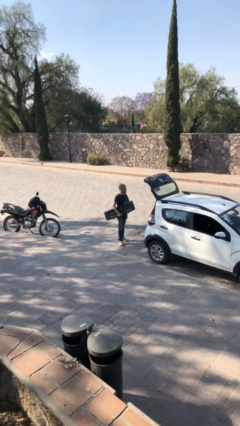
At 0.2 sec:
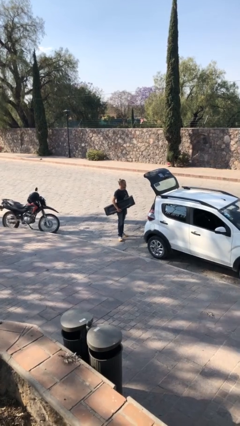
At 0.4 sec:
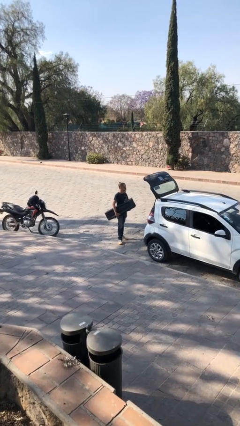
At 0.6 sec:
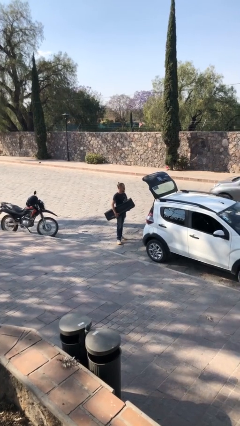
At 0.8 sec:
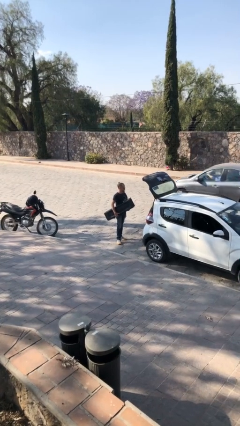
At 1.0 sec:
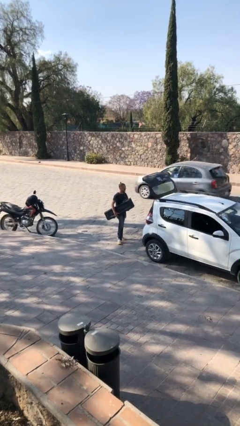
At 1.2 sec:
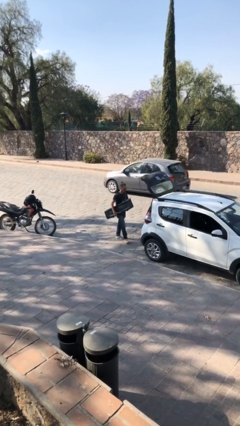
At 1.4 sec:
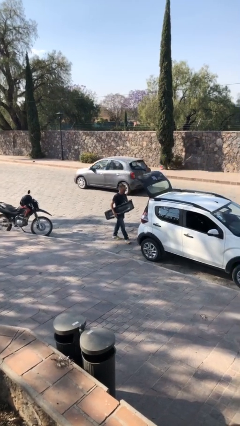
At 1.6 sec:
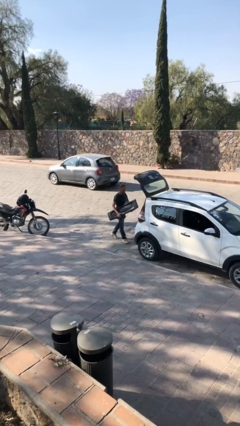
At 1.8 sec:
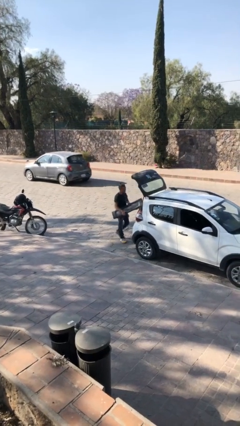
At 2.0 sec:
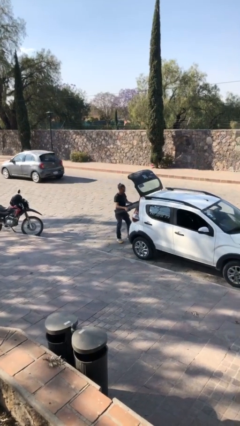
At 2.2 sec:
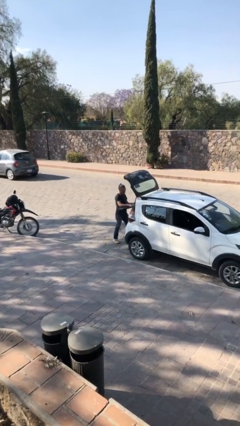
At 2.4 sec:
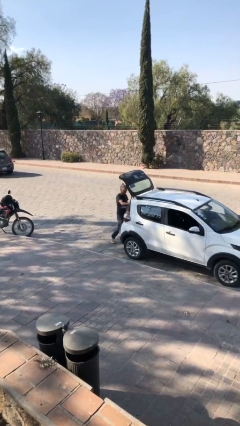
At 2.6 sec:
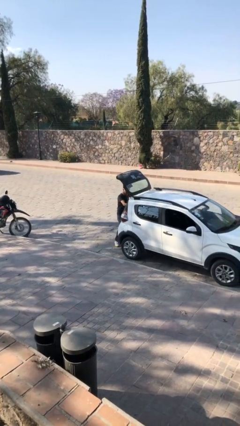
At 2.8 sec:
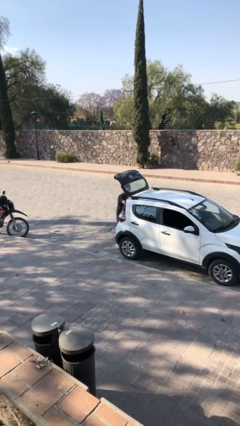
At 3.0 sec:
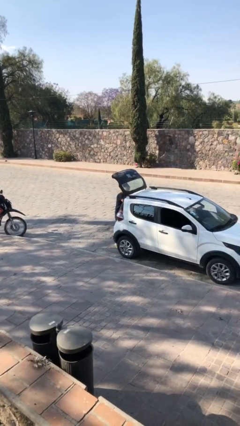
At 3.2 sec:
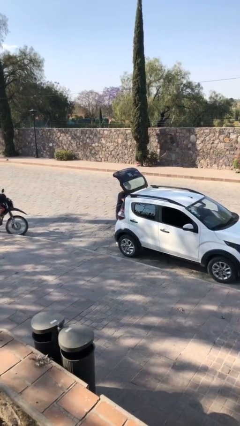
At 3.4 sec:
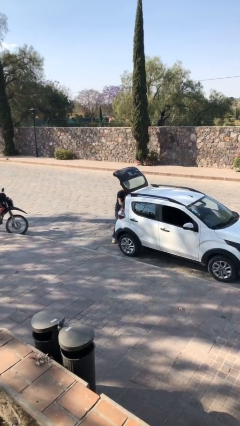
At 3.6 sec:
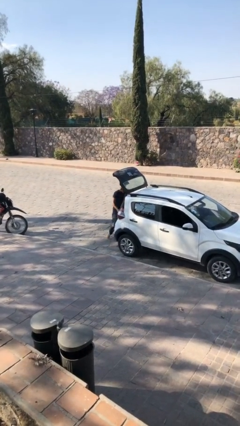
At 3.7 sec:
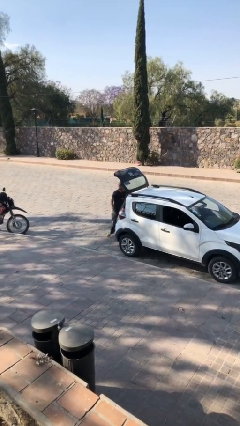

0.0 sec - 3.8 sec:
person loads car

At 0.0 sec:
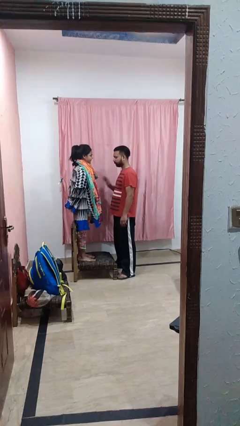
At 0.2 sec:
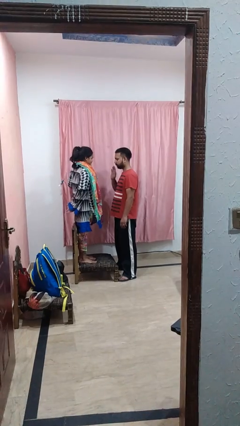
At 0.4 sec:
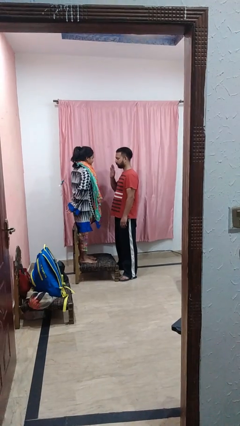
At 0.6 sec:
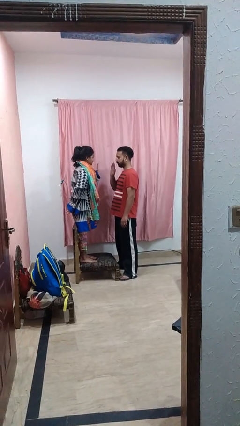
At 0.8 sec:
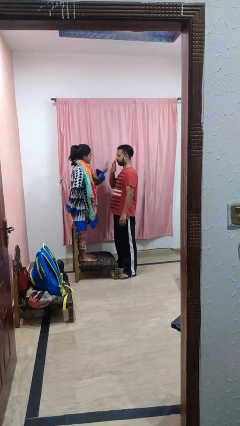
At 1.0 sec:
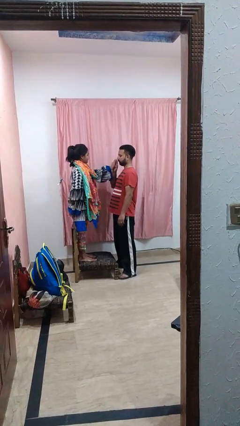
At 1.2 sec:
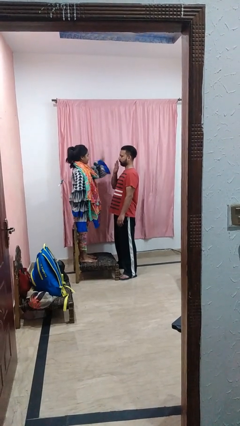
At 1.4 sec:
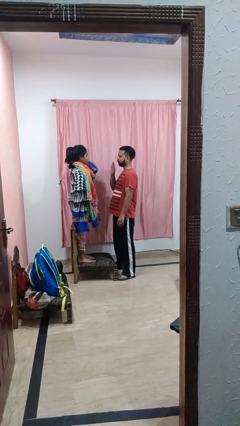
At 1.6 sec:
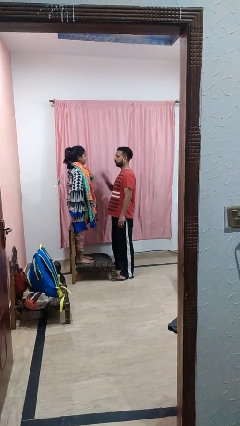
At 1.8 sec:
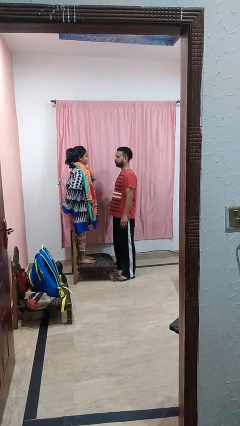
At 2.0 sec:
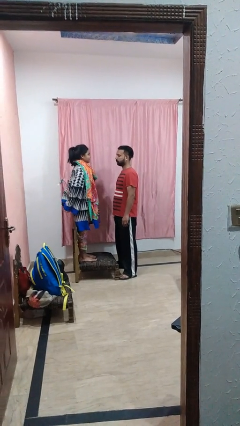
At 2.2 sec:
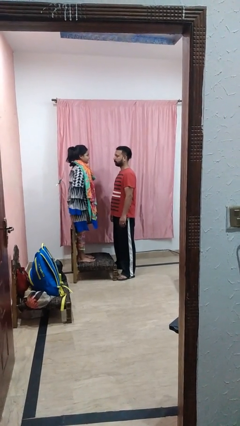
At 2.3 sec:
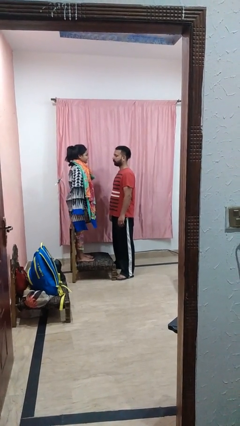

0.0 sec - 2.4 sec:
person highfives hand

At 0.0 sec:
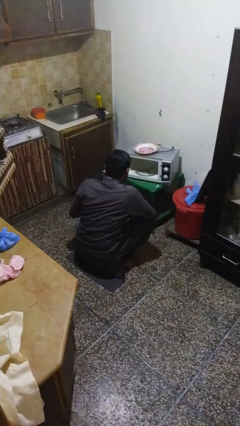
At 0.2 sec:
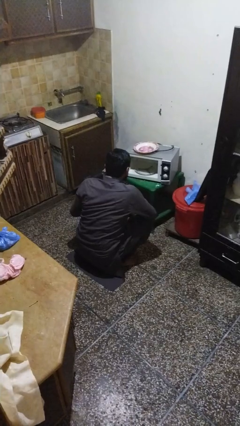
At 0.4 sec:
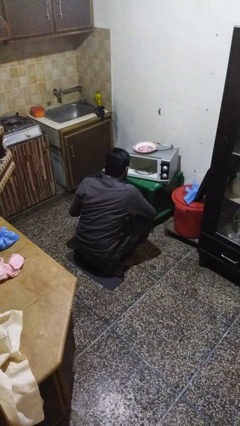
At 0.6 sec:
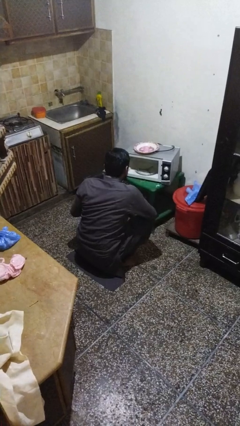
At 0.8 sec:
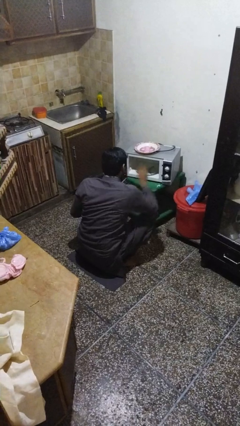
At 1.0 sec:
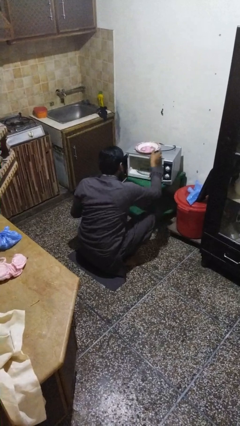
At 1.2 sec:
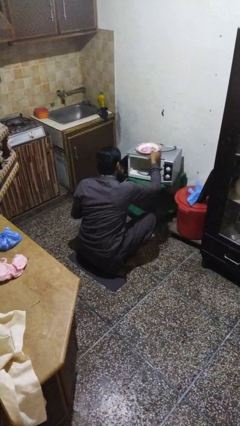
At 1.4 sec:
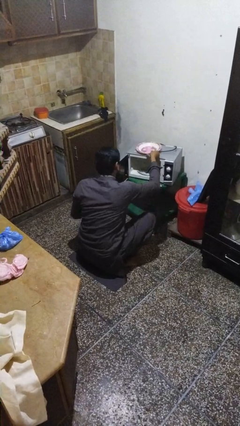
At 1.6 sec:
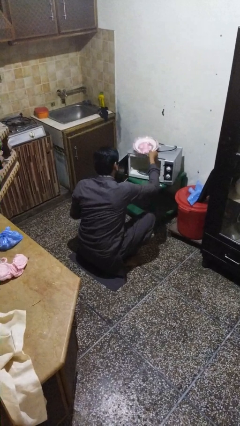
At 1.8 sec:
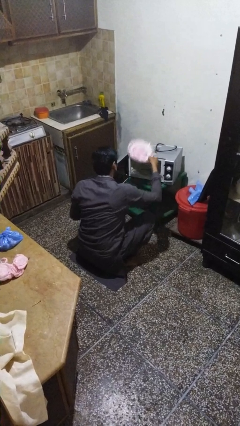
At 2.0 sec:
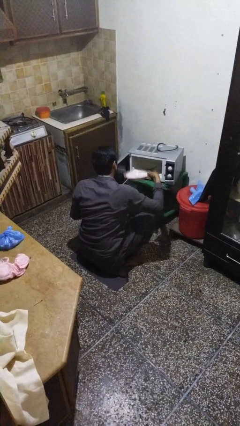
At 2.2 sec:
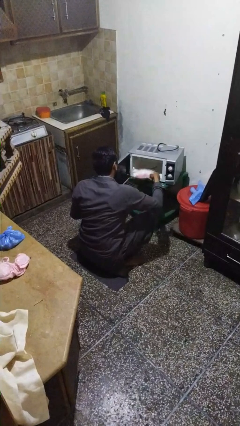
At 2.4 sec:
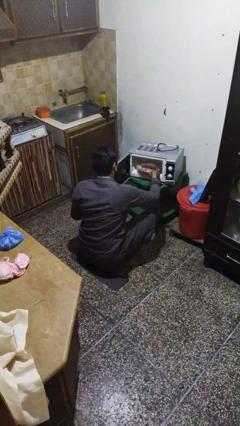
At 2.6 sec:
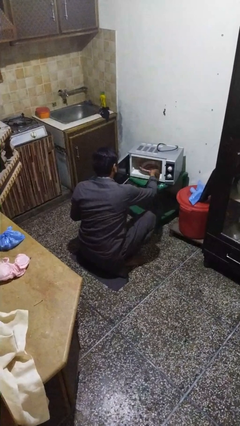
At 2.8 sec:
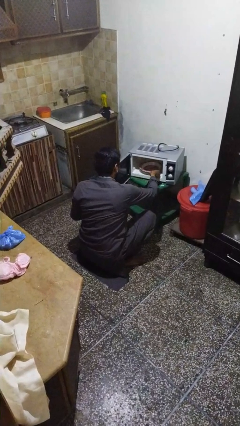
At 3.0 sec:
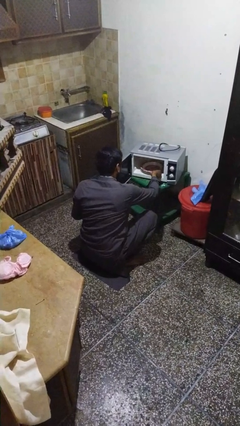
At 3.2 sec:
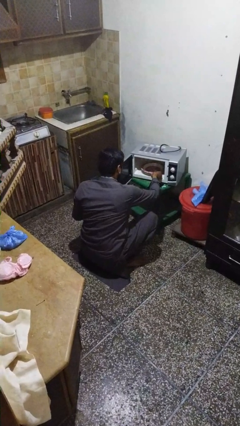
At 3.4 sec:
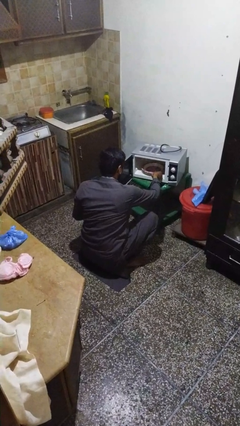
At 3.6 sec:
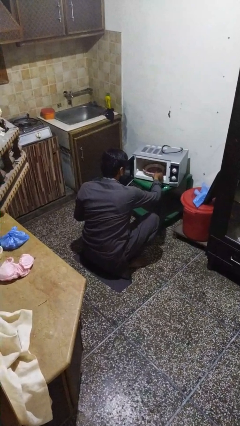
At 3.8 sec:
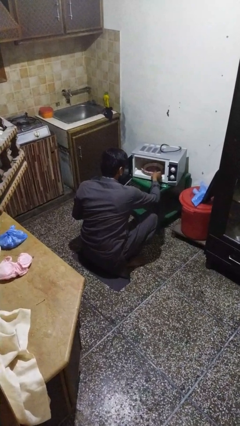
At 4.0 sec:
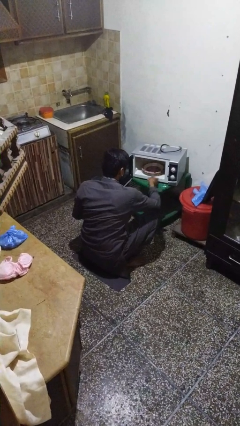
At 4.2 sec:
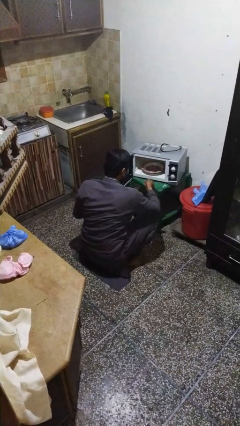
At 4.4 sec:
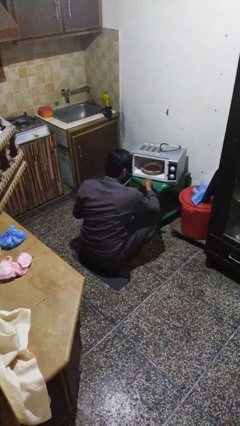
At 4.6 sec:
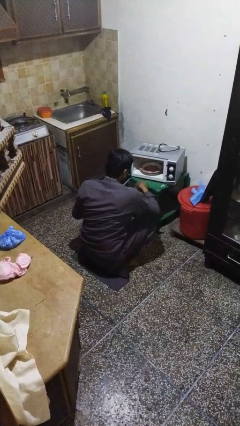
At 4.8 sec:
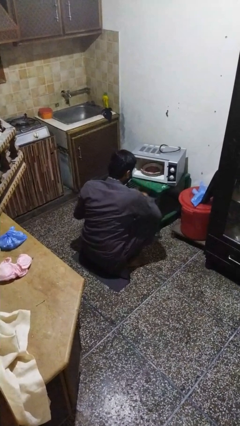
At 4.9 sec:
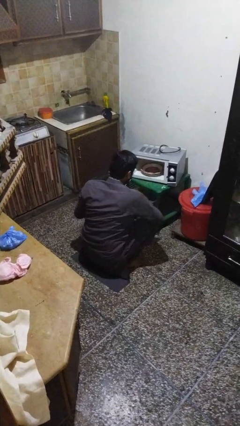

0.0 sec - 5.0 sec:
person puts object into microwave

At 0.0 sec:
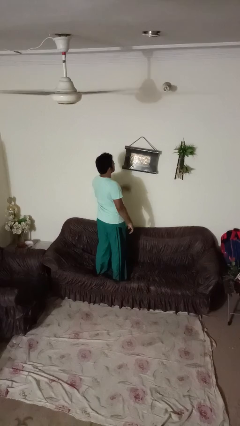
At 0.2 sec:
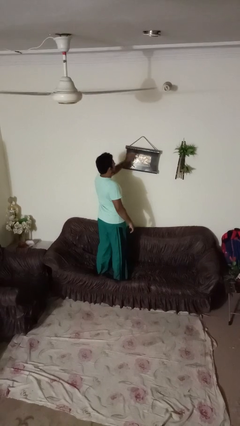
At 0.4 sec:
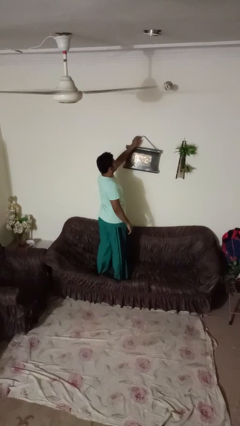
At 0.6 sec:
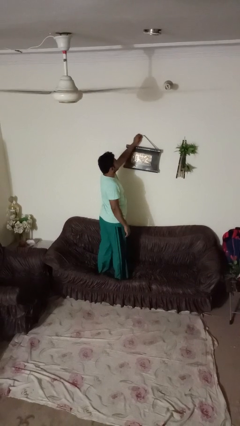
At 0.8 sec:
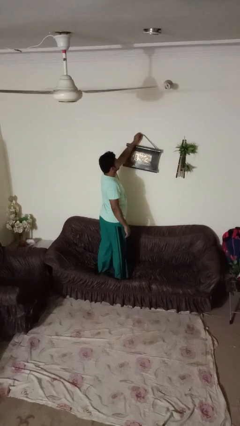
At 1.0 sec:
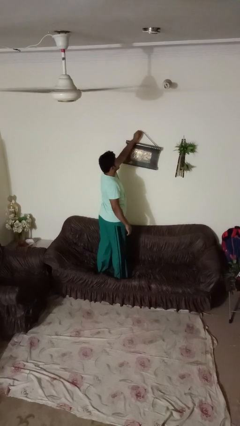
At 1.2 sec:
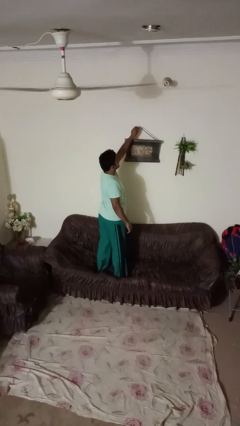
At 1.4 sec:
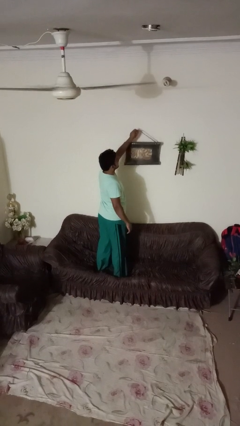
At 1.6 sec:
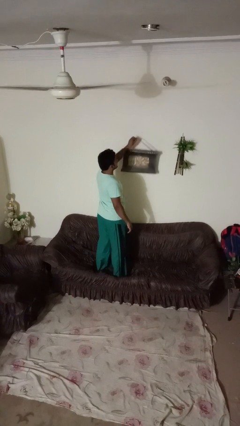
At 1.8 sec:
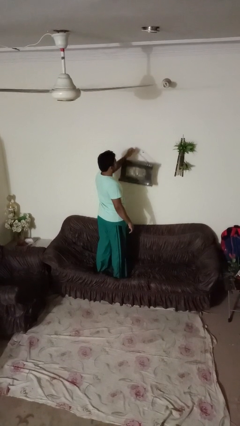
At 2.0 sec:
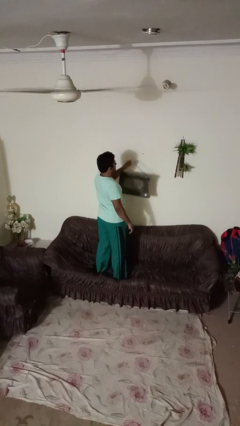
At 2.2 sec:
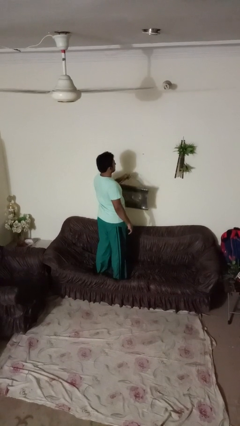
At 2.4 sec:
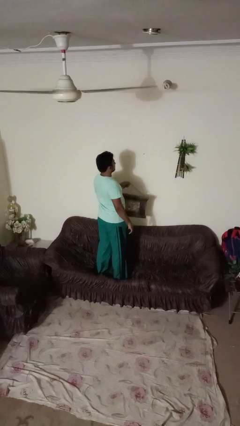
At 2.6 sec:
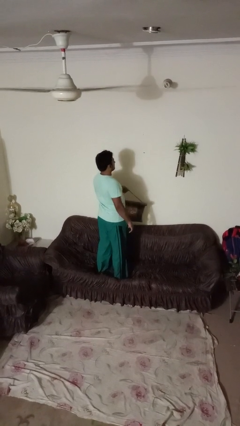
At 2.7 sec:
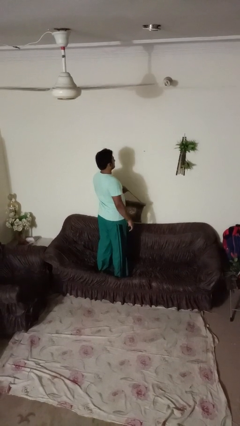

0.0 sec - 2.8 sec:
person takes down picture frame

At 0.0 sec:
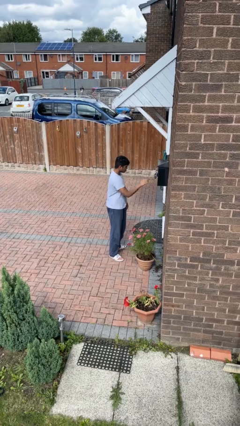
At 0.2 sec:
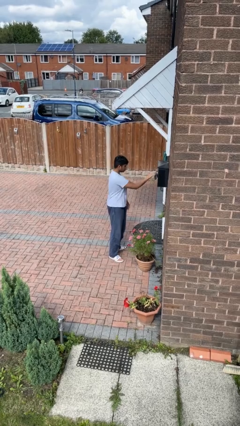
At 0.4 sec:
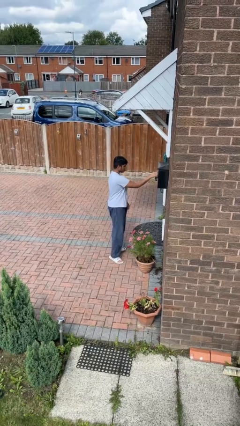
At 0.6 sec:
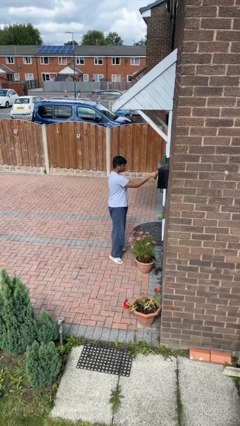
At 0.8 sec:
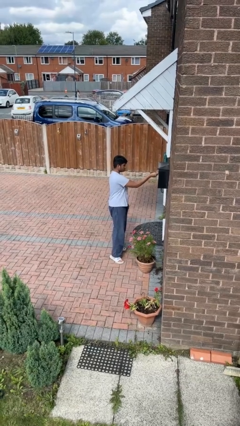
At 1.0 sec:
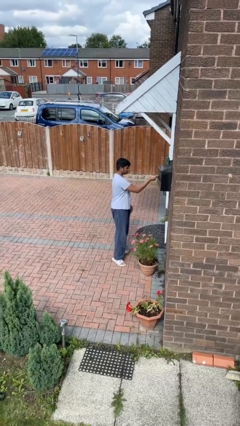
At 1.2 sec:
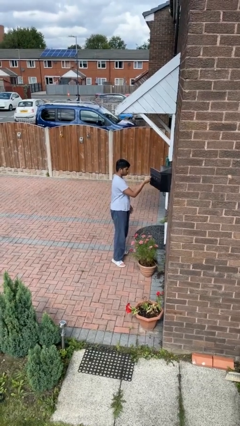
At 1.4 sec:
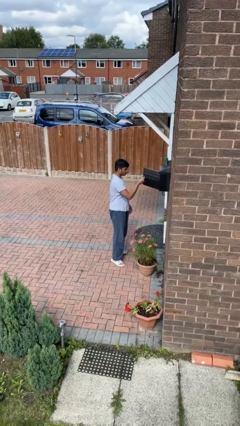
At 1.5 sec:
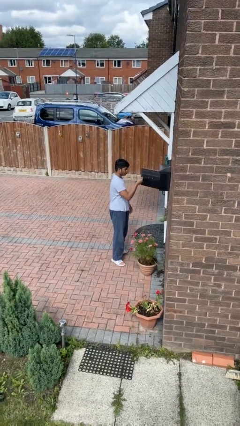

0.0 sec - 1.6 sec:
person opens mailbox

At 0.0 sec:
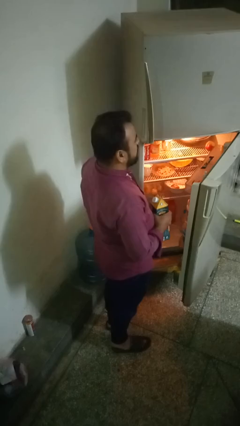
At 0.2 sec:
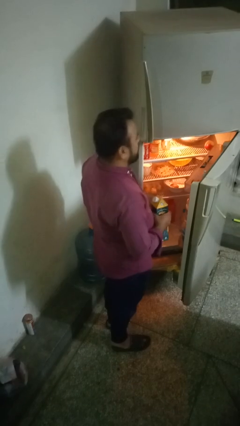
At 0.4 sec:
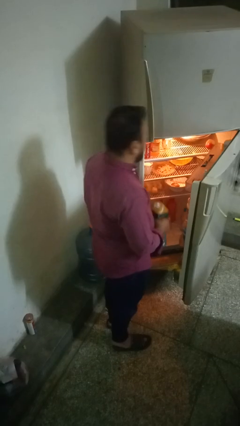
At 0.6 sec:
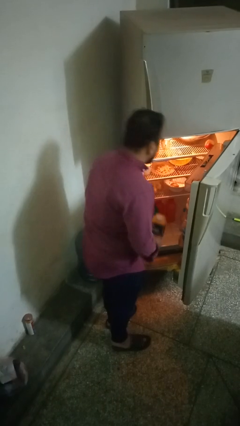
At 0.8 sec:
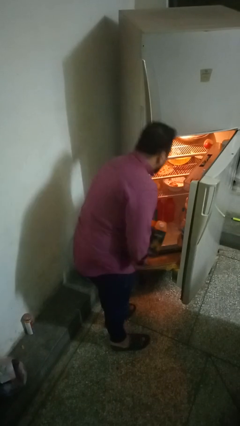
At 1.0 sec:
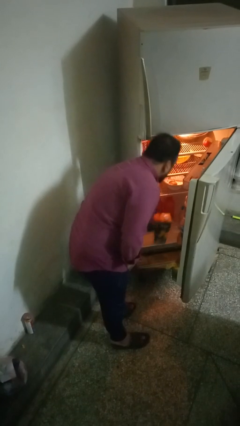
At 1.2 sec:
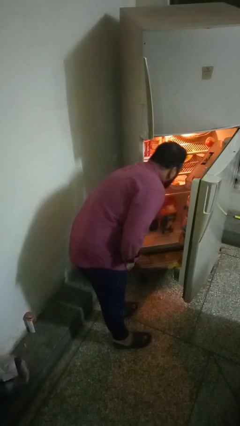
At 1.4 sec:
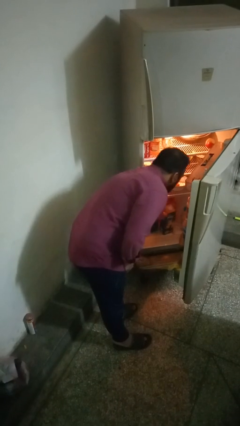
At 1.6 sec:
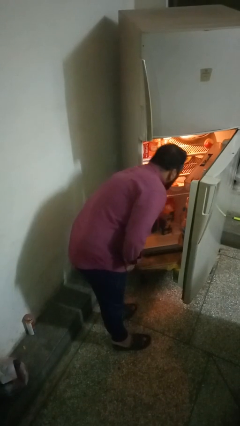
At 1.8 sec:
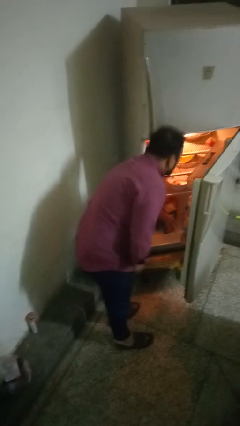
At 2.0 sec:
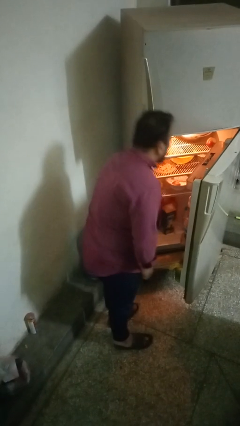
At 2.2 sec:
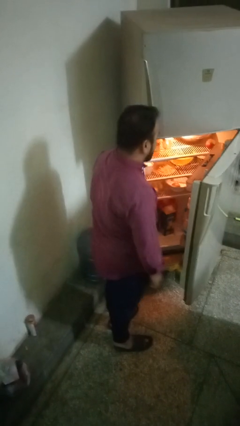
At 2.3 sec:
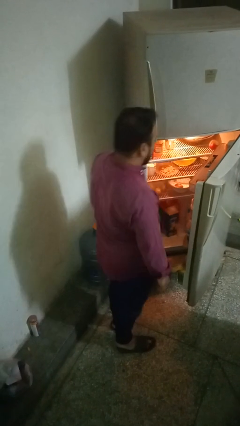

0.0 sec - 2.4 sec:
person puts object into refrigerator
